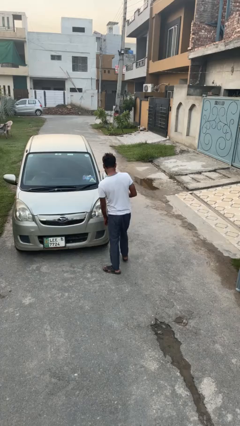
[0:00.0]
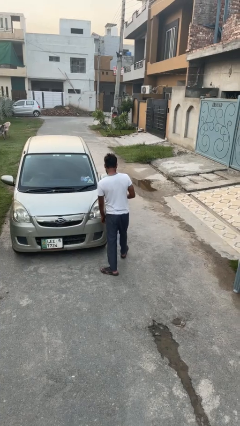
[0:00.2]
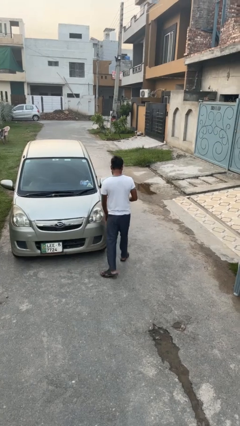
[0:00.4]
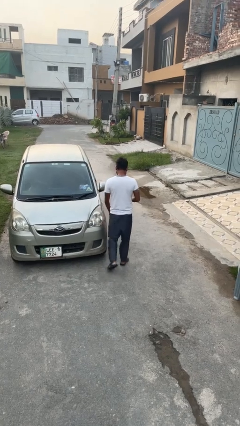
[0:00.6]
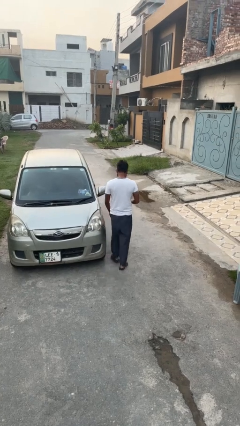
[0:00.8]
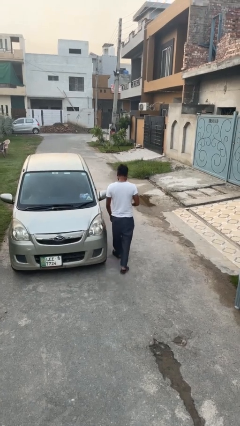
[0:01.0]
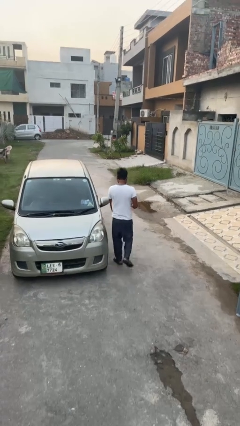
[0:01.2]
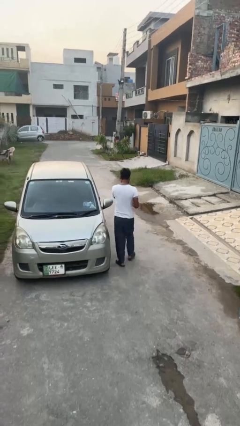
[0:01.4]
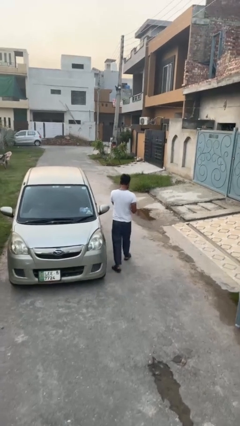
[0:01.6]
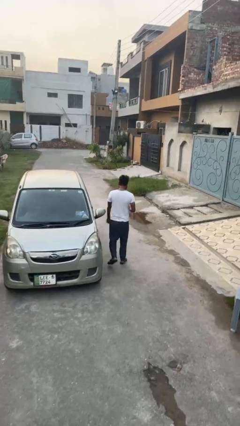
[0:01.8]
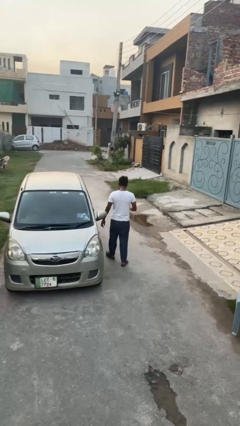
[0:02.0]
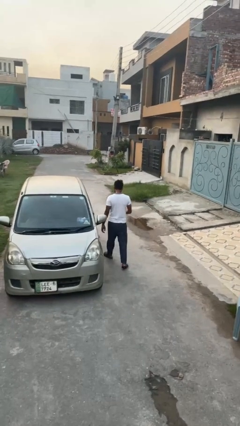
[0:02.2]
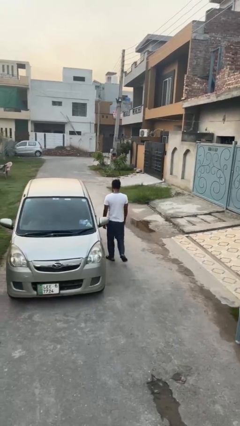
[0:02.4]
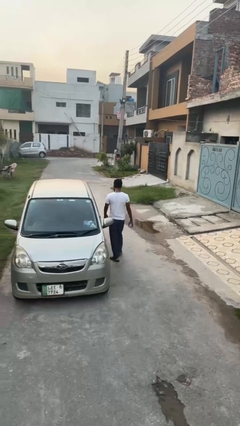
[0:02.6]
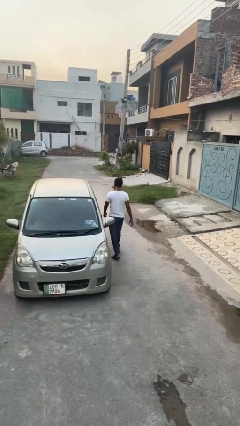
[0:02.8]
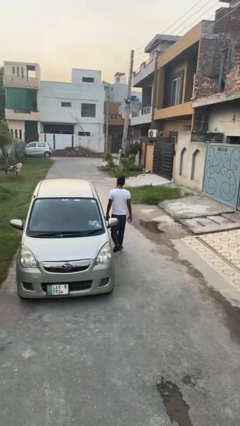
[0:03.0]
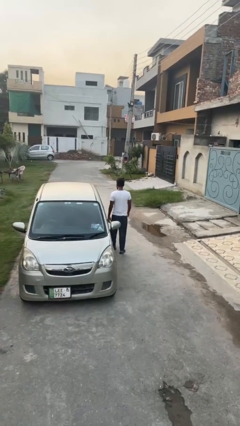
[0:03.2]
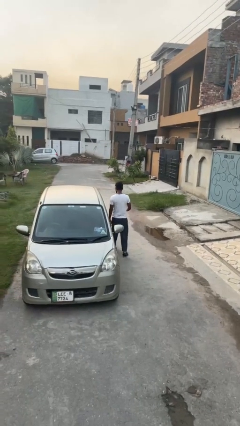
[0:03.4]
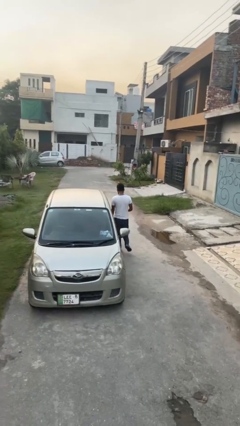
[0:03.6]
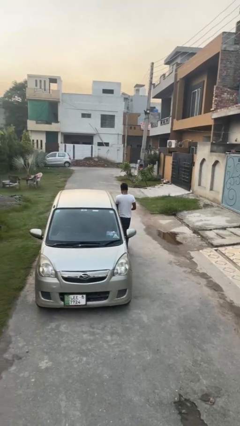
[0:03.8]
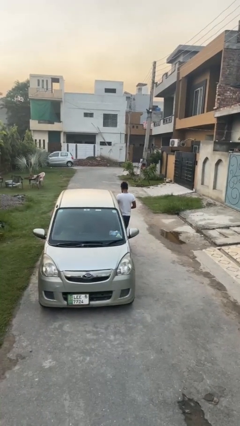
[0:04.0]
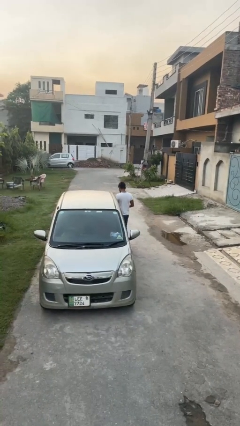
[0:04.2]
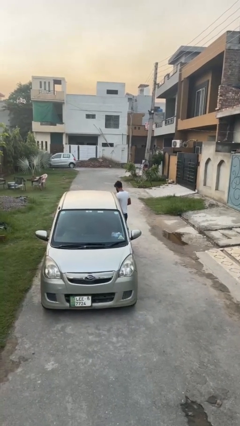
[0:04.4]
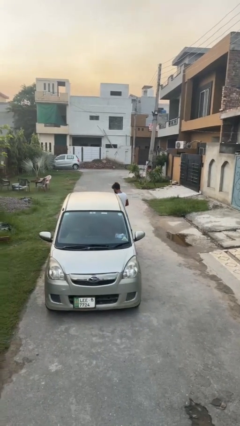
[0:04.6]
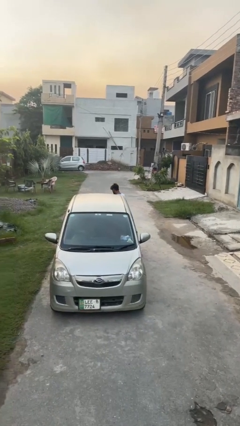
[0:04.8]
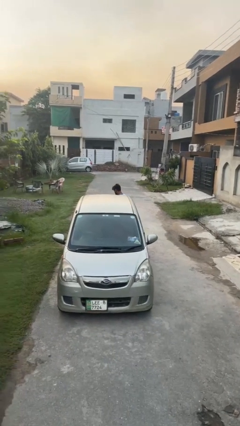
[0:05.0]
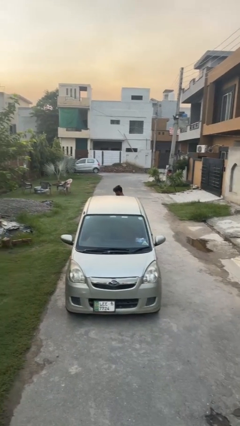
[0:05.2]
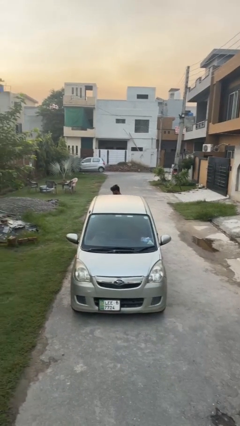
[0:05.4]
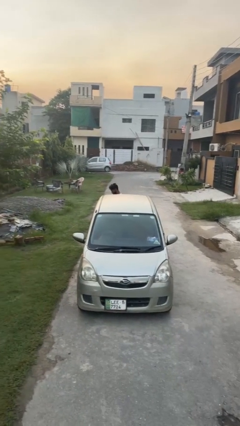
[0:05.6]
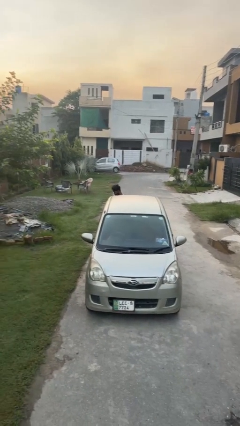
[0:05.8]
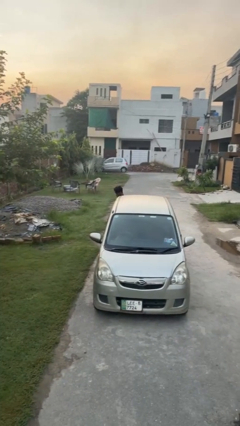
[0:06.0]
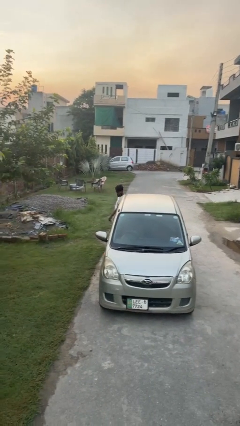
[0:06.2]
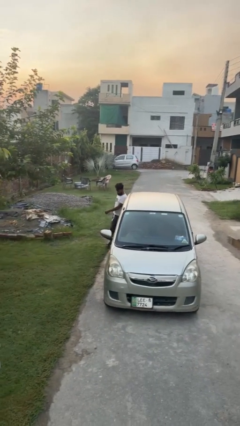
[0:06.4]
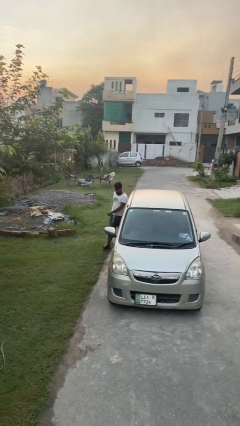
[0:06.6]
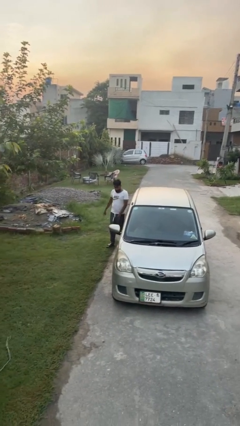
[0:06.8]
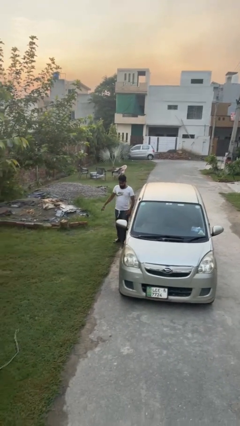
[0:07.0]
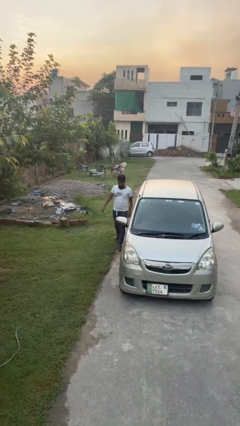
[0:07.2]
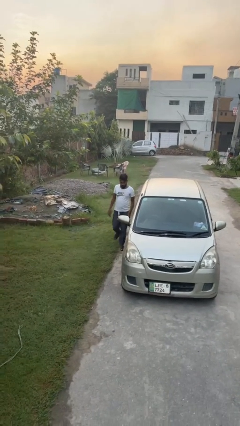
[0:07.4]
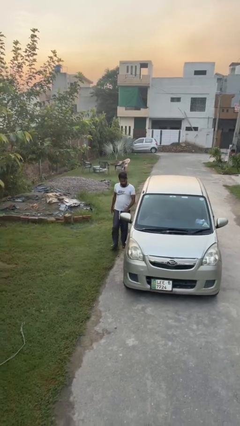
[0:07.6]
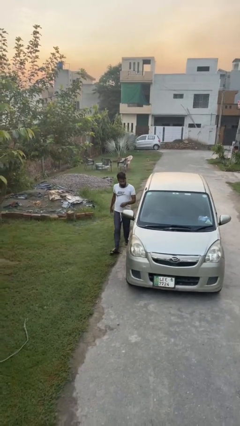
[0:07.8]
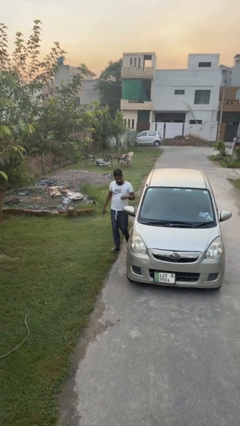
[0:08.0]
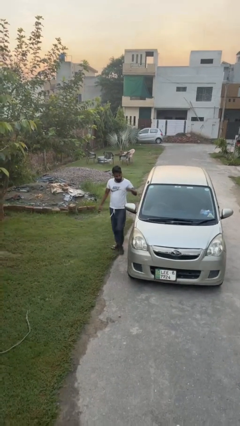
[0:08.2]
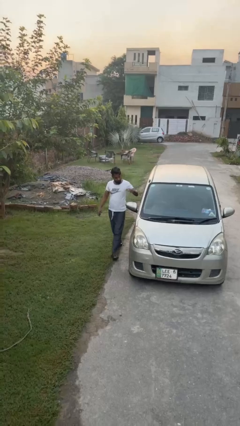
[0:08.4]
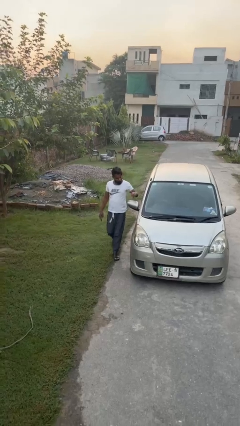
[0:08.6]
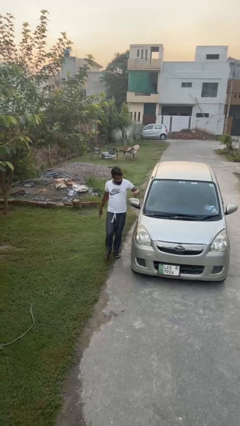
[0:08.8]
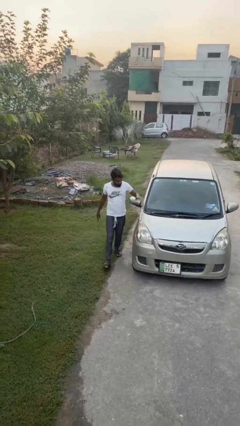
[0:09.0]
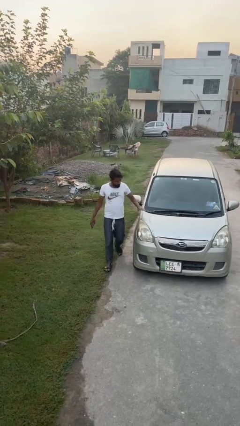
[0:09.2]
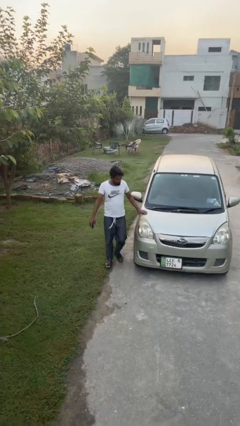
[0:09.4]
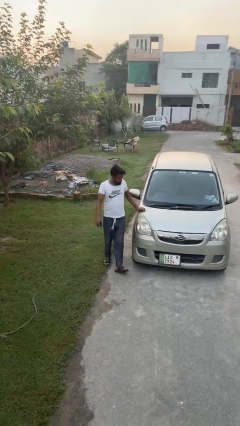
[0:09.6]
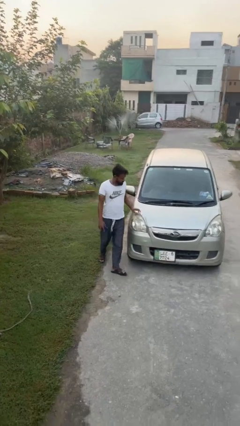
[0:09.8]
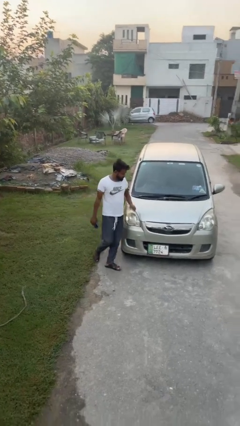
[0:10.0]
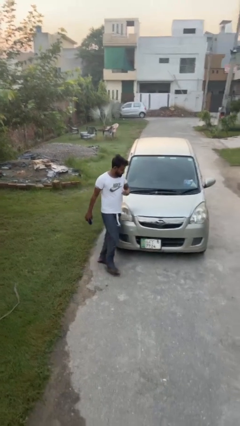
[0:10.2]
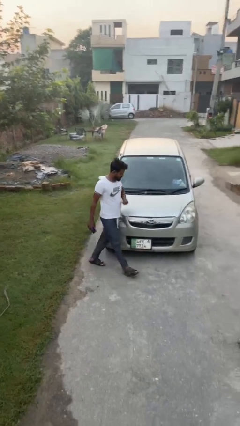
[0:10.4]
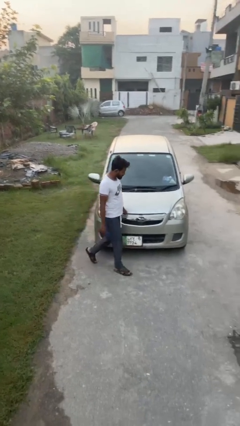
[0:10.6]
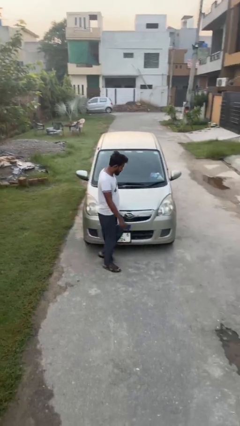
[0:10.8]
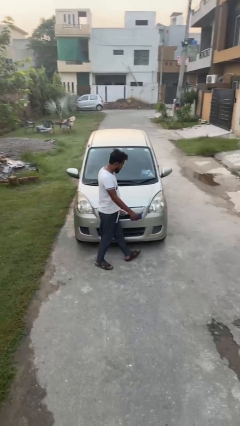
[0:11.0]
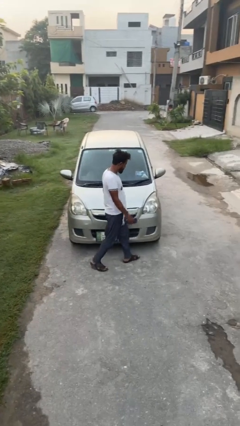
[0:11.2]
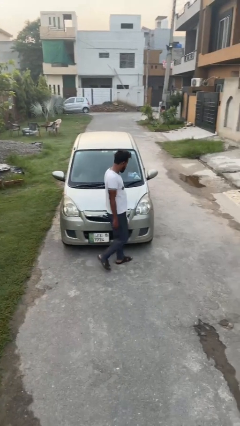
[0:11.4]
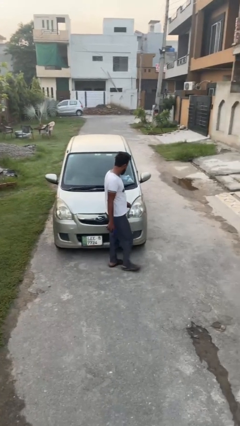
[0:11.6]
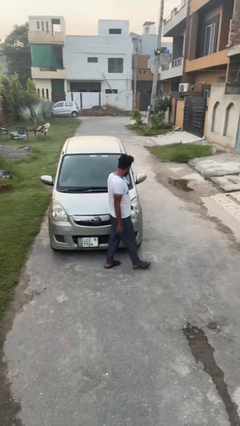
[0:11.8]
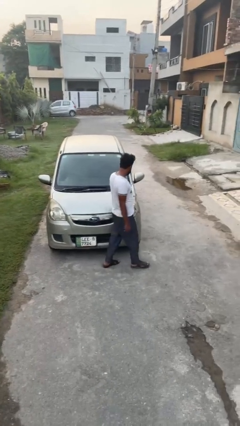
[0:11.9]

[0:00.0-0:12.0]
person walks around car

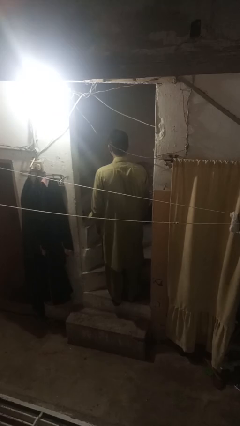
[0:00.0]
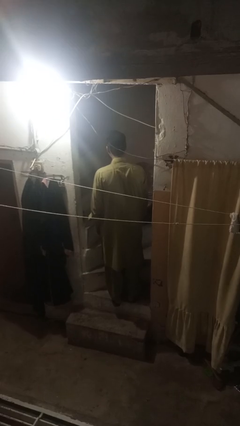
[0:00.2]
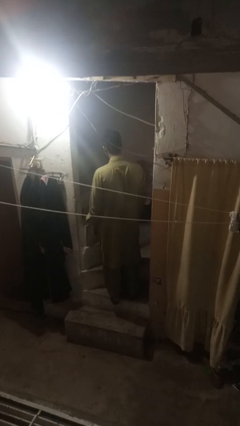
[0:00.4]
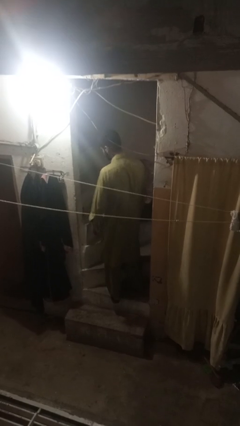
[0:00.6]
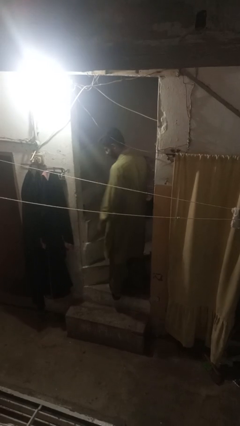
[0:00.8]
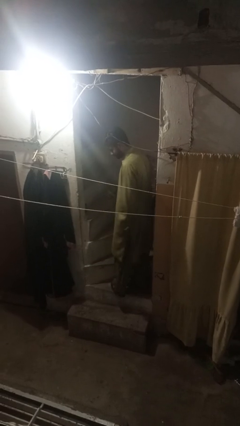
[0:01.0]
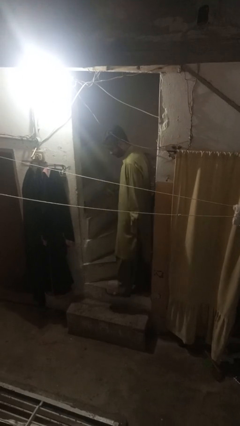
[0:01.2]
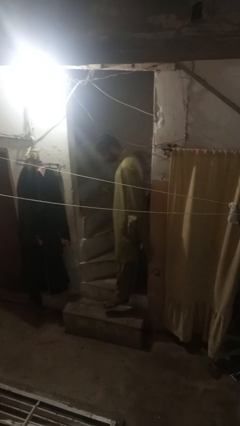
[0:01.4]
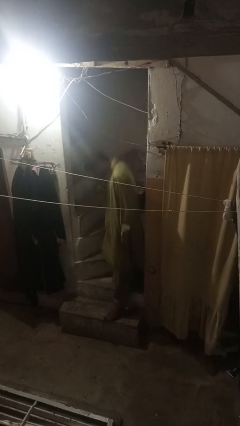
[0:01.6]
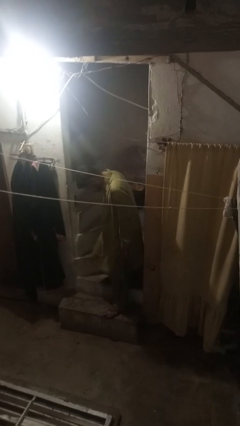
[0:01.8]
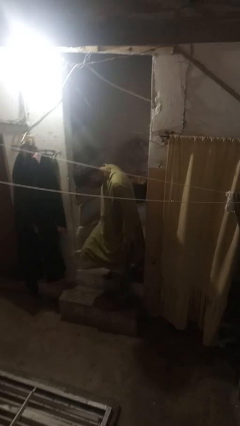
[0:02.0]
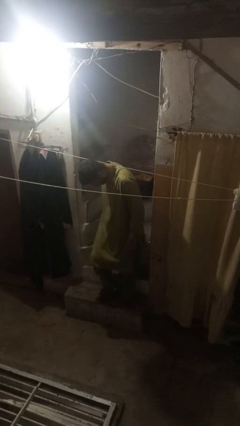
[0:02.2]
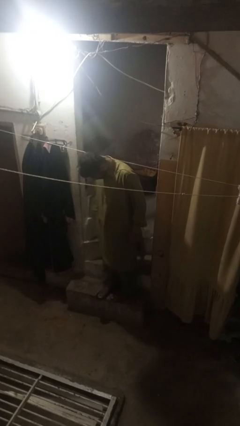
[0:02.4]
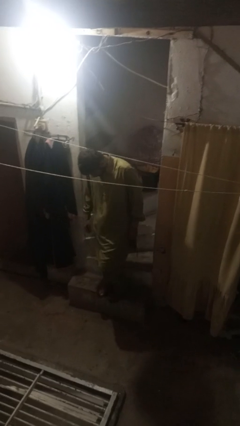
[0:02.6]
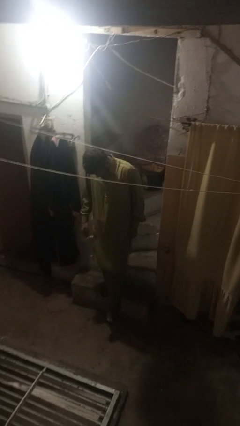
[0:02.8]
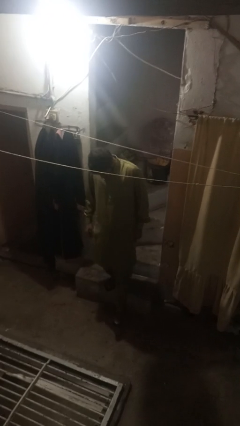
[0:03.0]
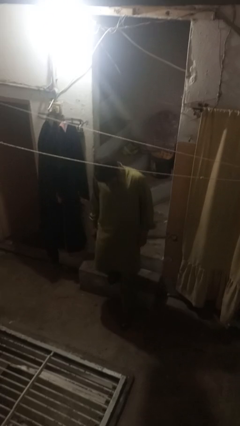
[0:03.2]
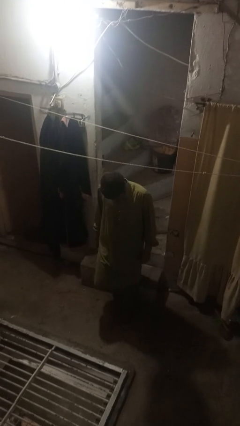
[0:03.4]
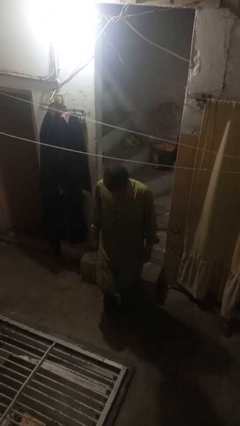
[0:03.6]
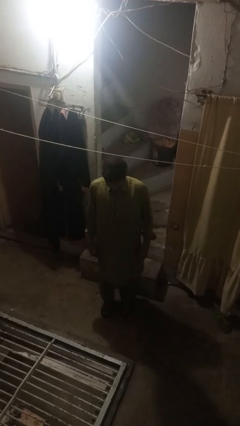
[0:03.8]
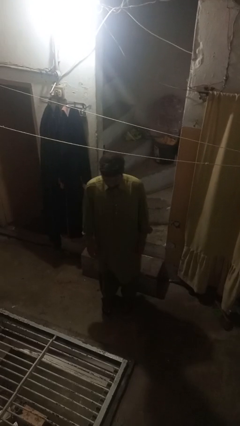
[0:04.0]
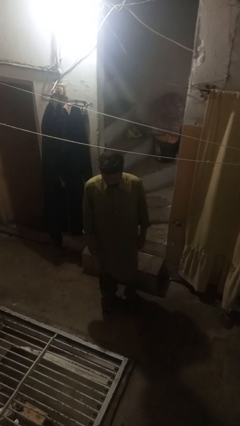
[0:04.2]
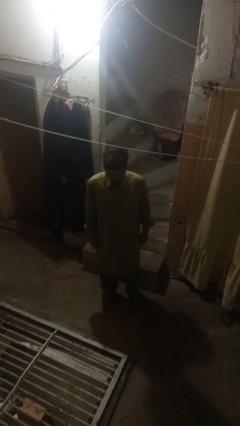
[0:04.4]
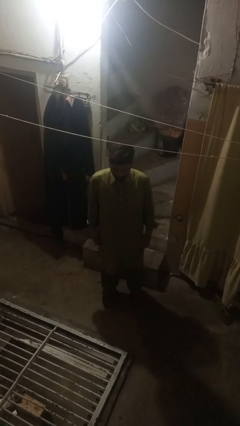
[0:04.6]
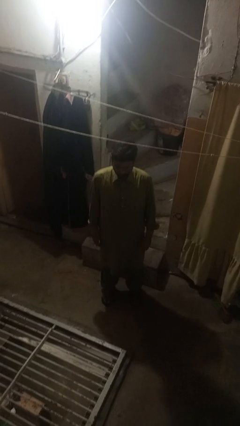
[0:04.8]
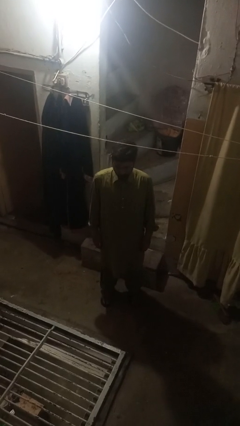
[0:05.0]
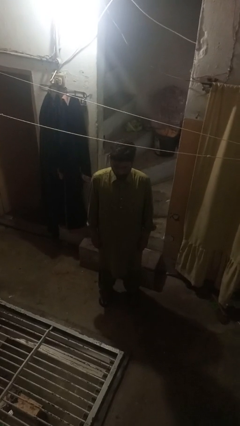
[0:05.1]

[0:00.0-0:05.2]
person climbs down stairs

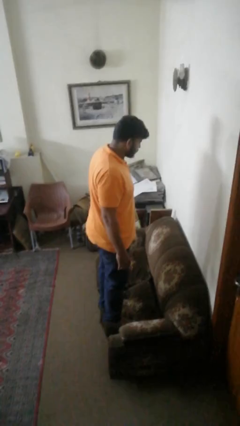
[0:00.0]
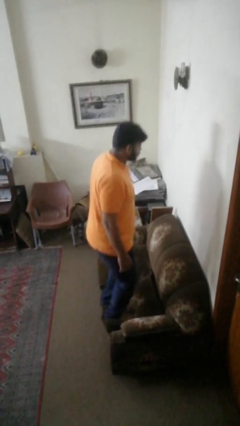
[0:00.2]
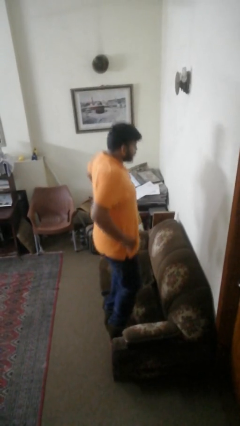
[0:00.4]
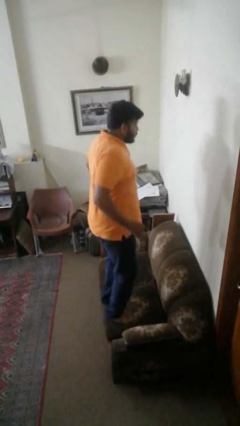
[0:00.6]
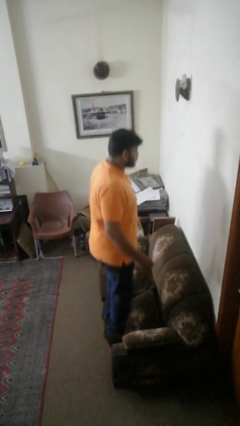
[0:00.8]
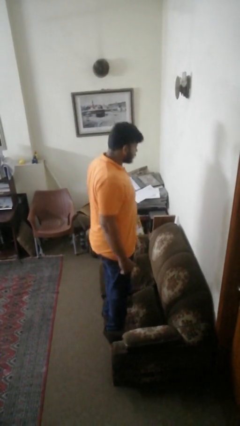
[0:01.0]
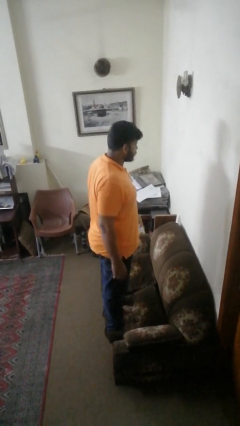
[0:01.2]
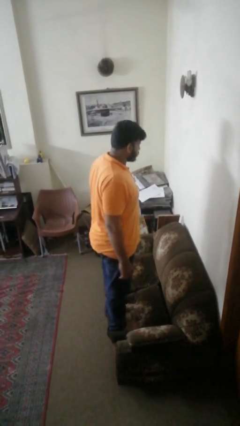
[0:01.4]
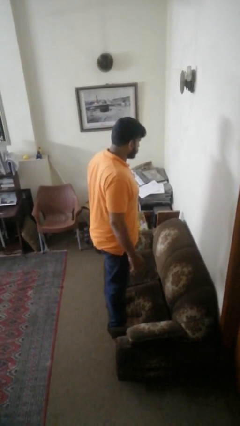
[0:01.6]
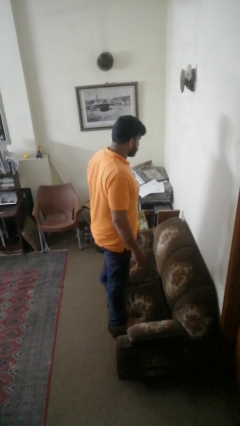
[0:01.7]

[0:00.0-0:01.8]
person jumps on couch
